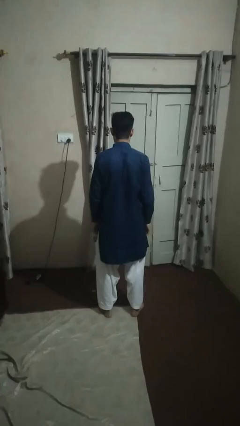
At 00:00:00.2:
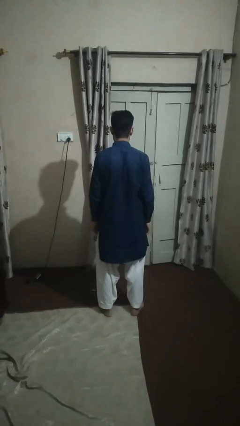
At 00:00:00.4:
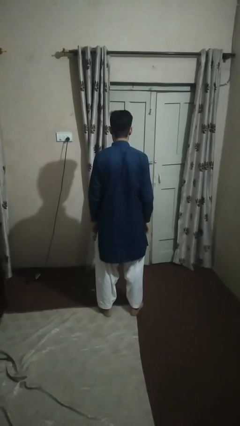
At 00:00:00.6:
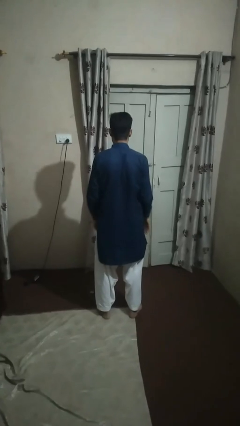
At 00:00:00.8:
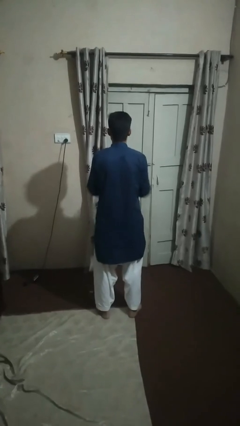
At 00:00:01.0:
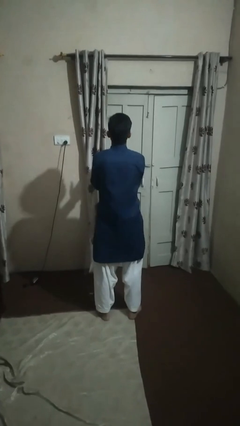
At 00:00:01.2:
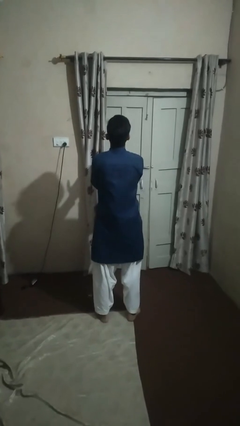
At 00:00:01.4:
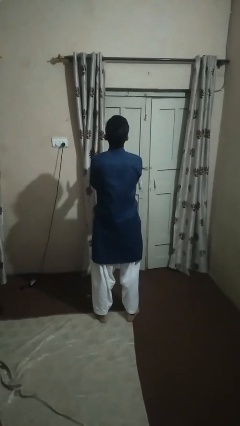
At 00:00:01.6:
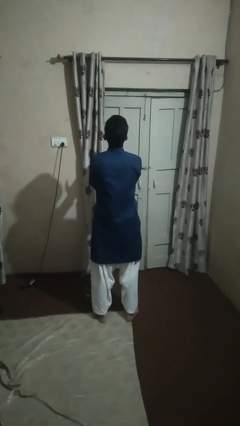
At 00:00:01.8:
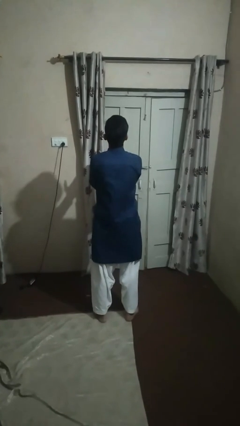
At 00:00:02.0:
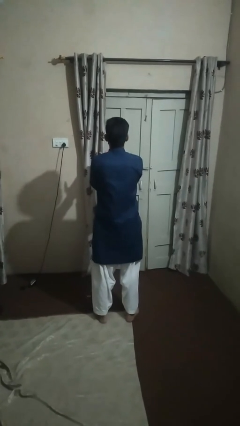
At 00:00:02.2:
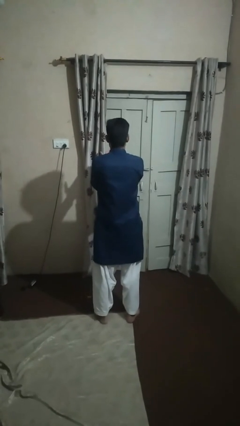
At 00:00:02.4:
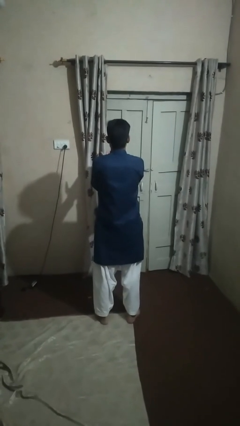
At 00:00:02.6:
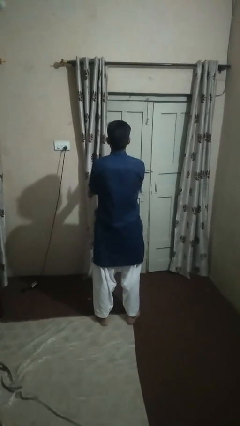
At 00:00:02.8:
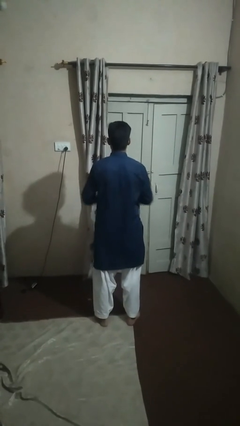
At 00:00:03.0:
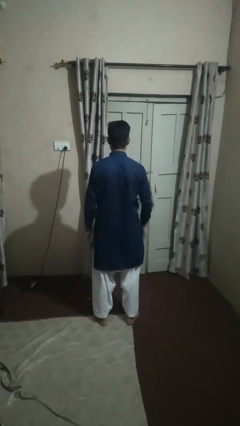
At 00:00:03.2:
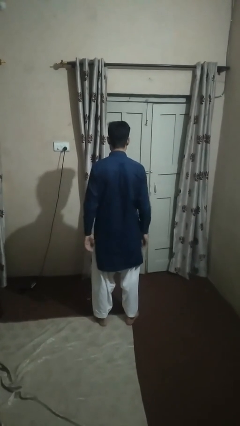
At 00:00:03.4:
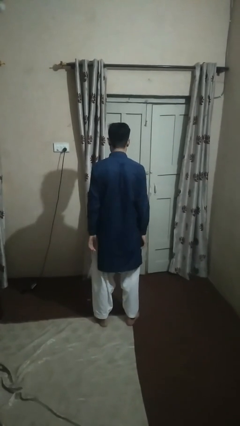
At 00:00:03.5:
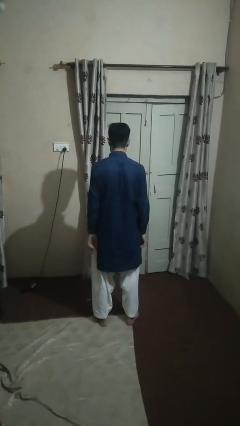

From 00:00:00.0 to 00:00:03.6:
person prays

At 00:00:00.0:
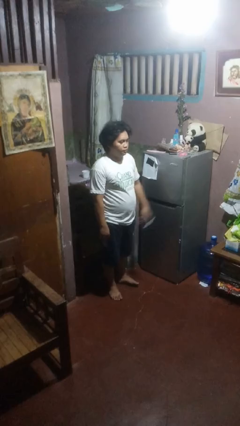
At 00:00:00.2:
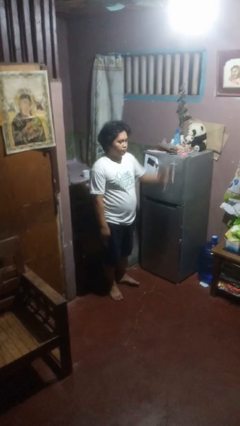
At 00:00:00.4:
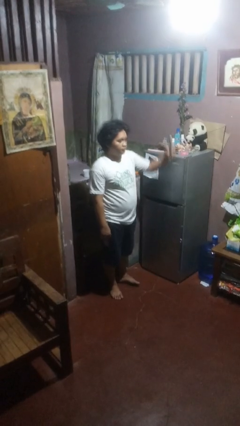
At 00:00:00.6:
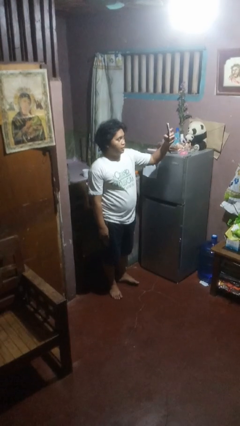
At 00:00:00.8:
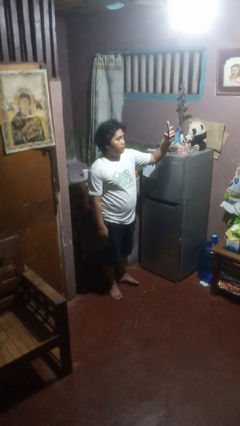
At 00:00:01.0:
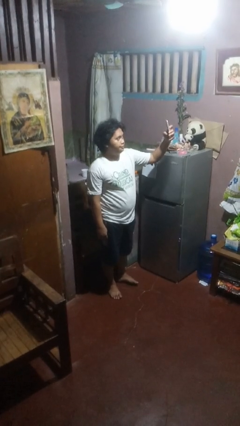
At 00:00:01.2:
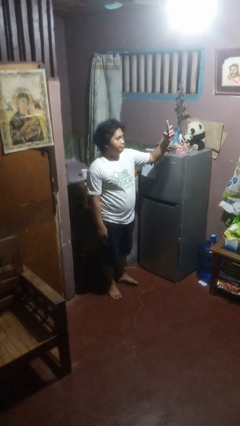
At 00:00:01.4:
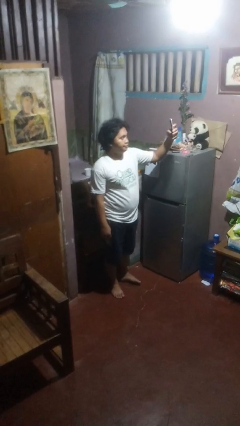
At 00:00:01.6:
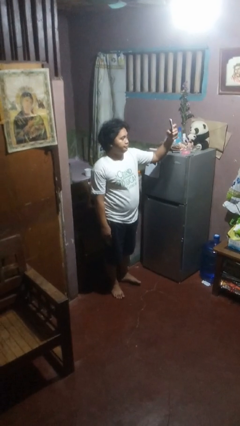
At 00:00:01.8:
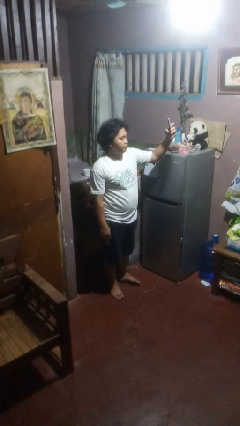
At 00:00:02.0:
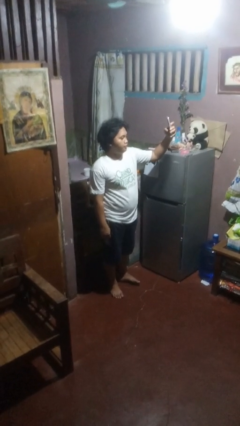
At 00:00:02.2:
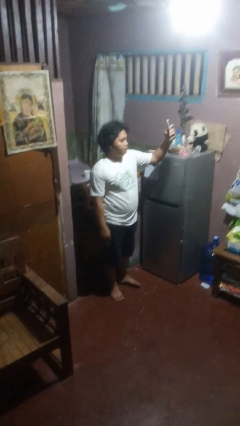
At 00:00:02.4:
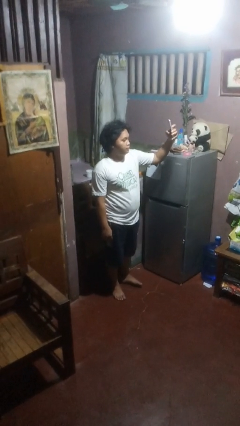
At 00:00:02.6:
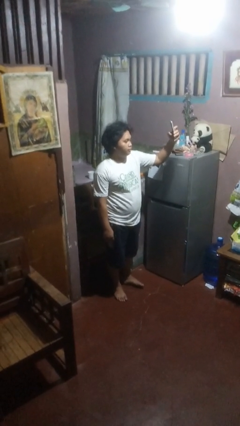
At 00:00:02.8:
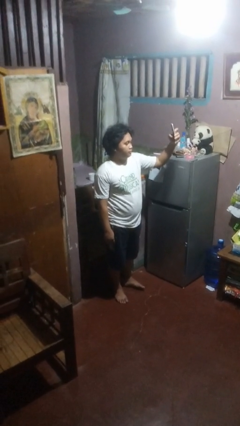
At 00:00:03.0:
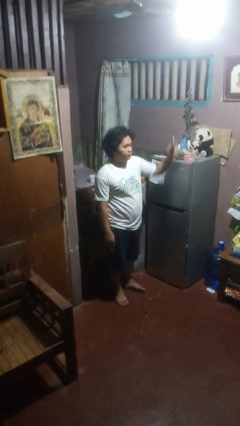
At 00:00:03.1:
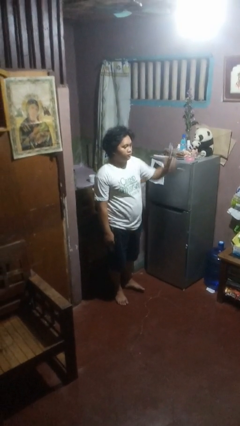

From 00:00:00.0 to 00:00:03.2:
person takes selfie

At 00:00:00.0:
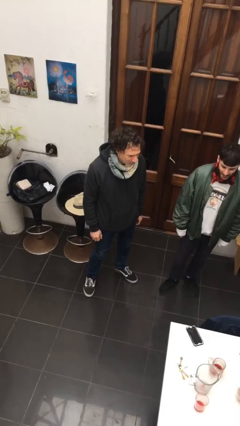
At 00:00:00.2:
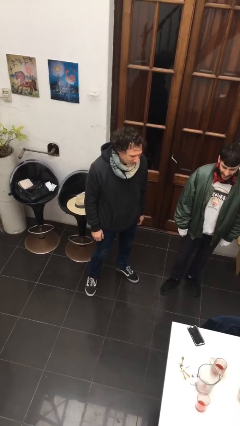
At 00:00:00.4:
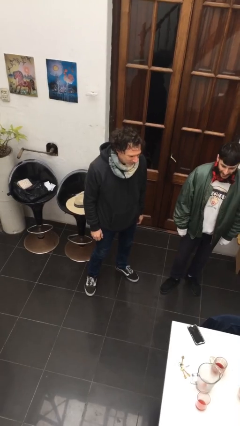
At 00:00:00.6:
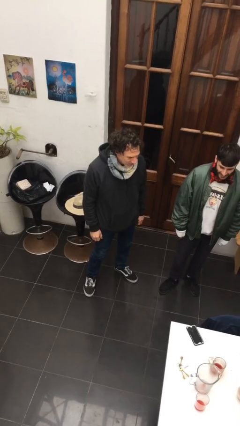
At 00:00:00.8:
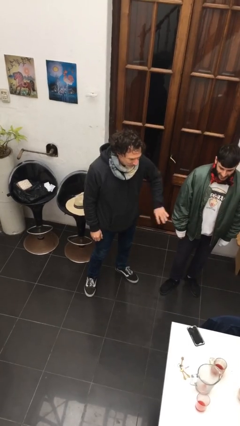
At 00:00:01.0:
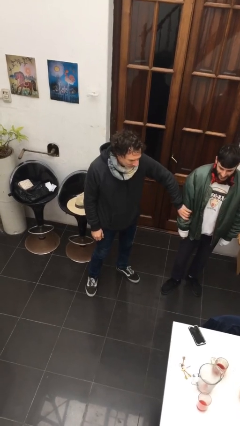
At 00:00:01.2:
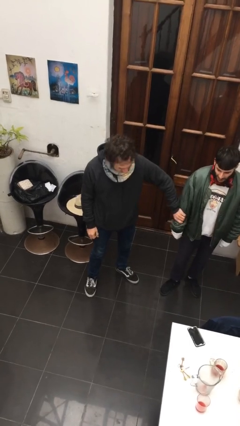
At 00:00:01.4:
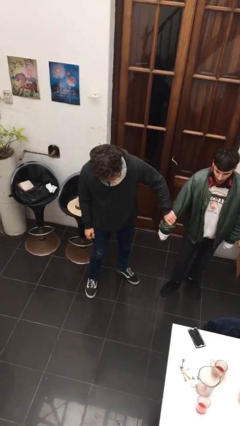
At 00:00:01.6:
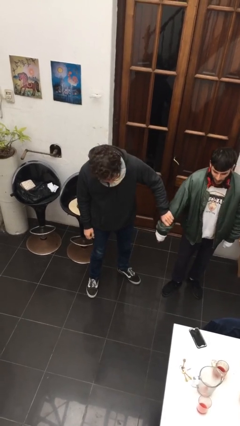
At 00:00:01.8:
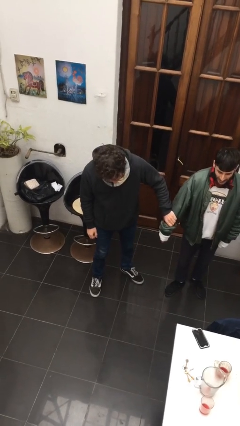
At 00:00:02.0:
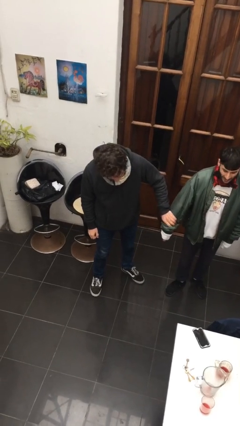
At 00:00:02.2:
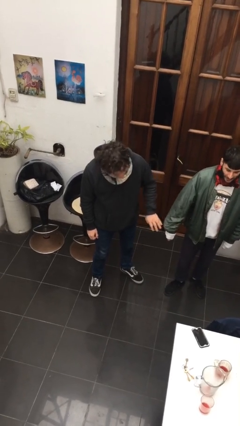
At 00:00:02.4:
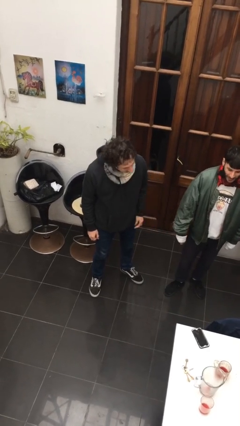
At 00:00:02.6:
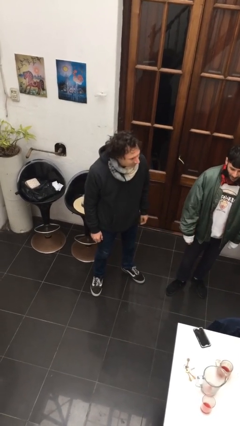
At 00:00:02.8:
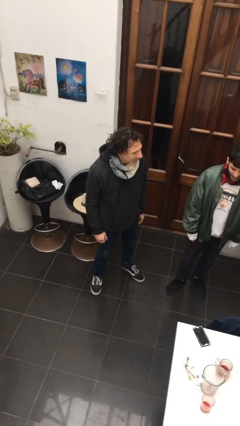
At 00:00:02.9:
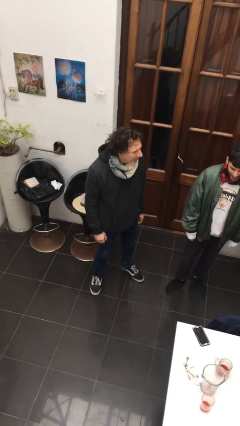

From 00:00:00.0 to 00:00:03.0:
person grabs person by forearm

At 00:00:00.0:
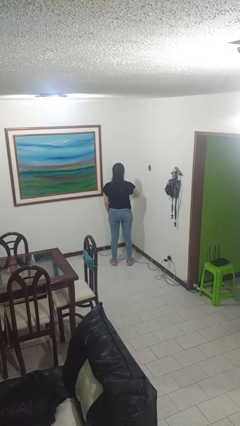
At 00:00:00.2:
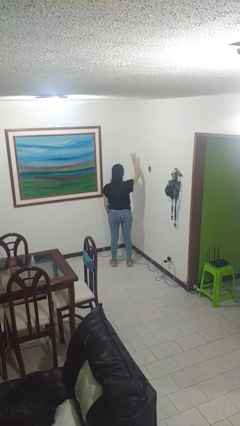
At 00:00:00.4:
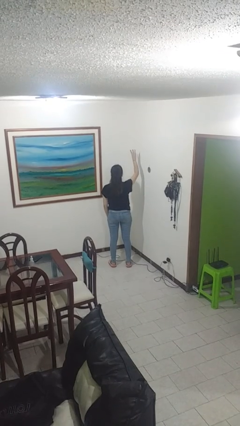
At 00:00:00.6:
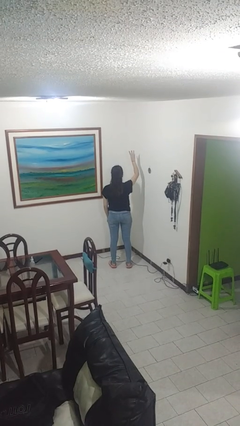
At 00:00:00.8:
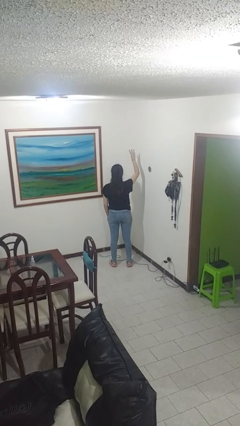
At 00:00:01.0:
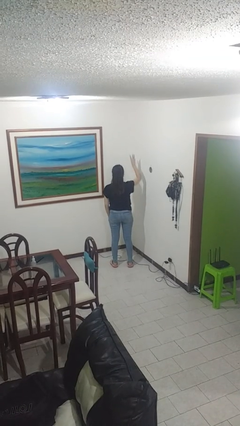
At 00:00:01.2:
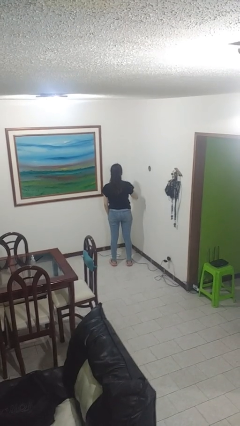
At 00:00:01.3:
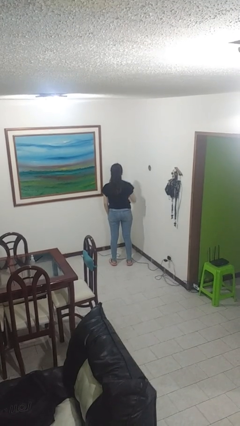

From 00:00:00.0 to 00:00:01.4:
person gestures number three

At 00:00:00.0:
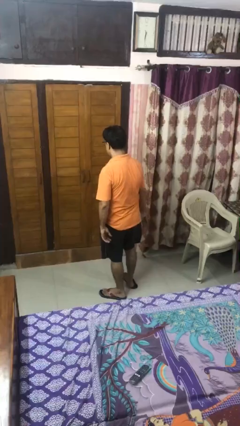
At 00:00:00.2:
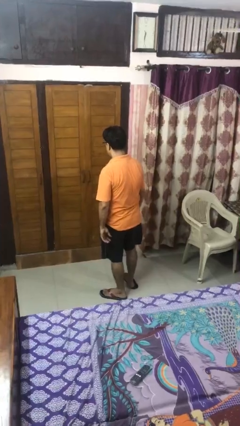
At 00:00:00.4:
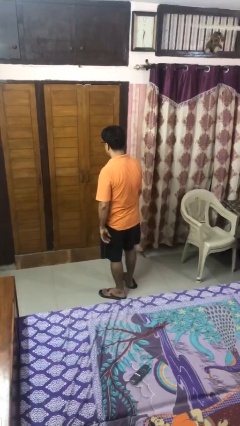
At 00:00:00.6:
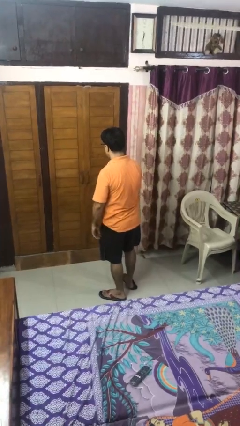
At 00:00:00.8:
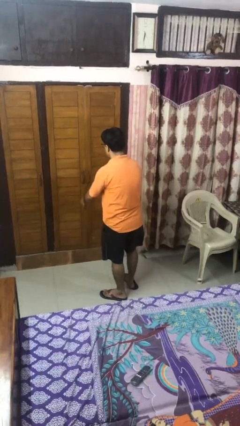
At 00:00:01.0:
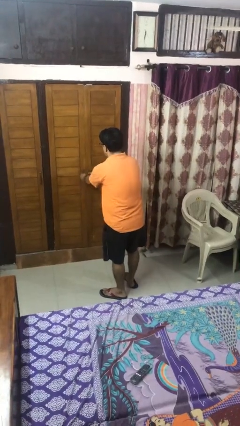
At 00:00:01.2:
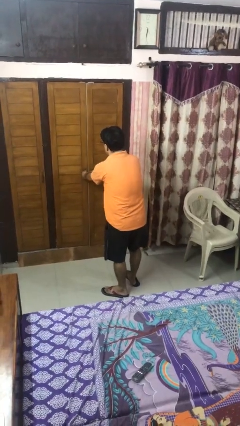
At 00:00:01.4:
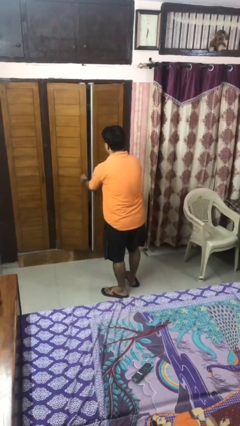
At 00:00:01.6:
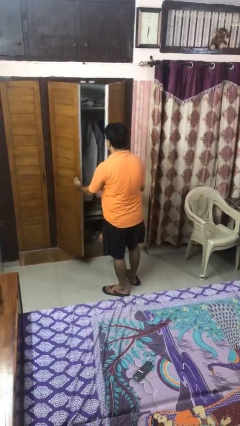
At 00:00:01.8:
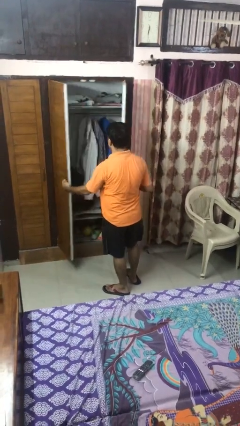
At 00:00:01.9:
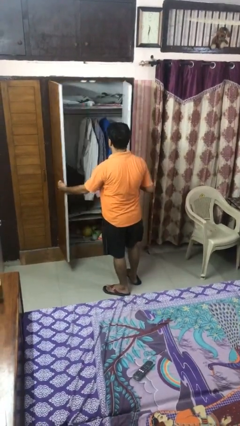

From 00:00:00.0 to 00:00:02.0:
person opens closet door

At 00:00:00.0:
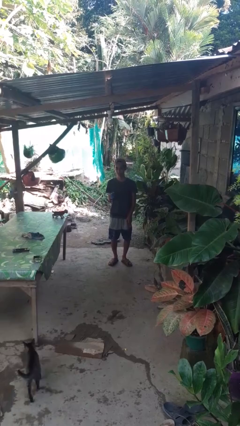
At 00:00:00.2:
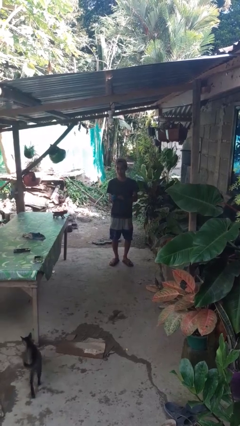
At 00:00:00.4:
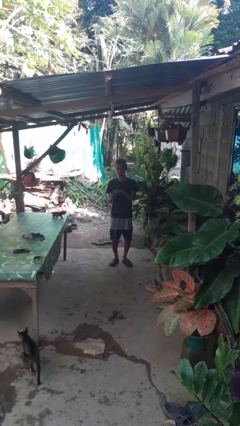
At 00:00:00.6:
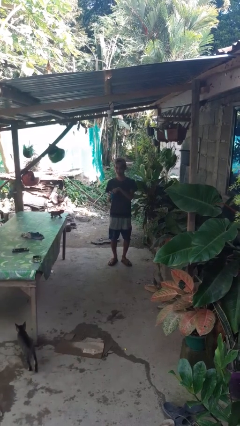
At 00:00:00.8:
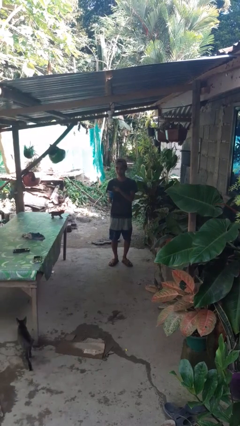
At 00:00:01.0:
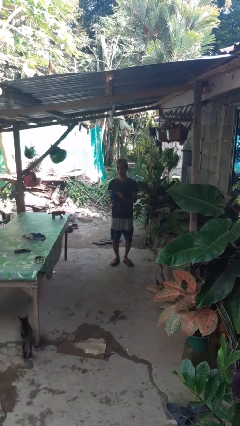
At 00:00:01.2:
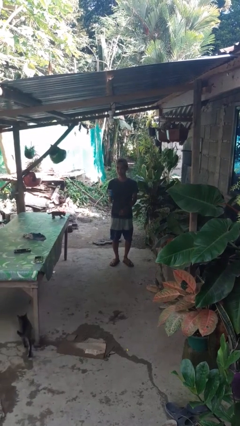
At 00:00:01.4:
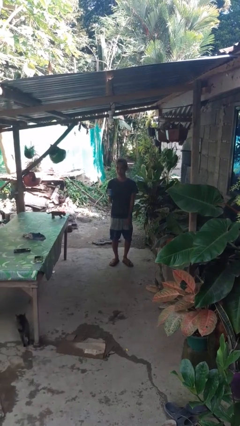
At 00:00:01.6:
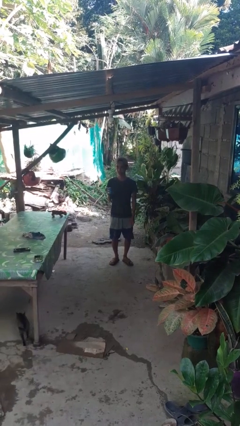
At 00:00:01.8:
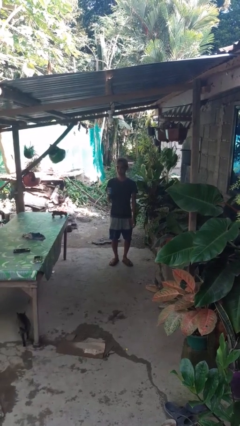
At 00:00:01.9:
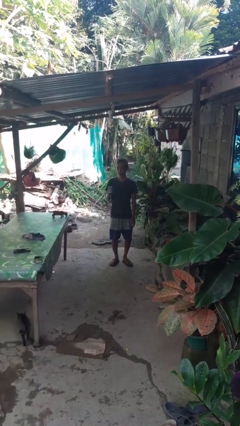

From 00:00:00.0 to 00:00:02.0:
person opens beverage can

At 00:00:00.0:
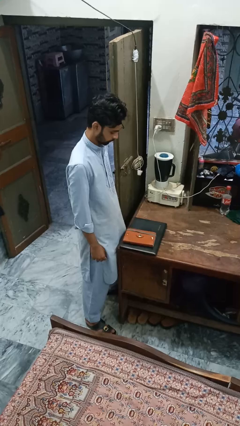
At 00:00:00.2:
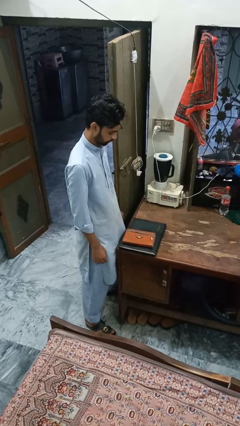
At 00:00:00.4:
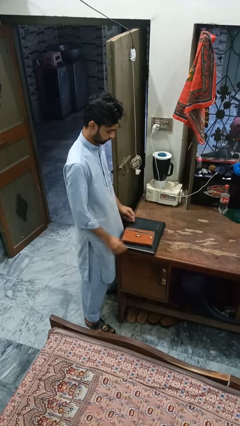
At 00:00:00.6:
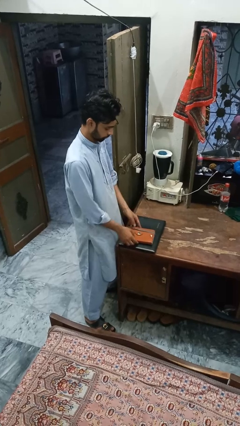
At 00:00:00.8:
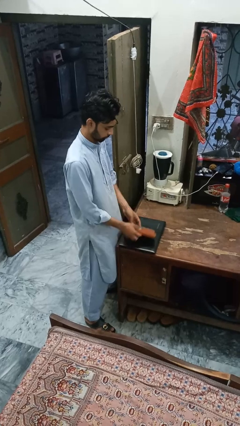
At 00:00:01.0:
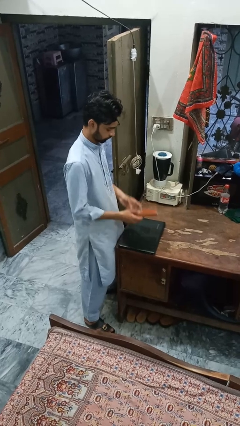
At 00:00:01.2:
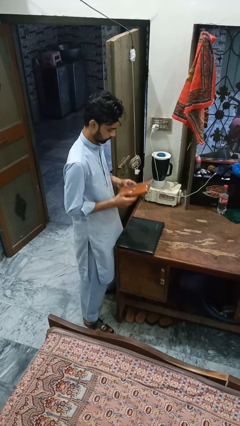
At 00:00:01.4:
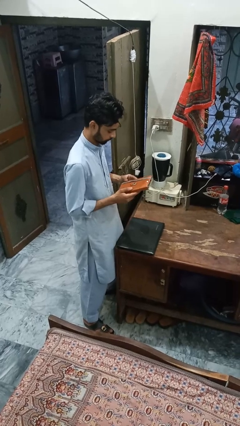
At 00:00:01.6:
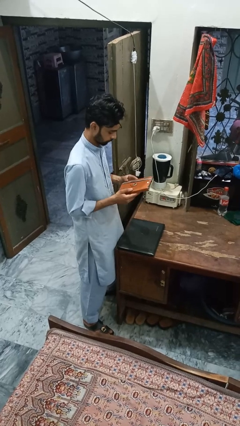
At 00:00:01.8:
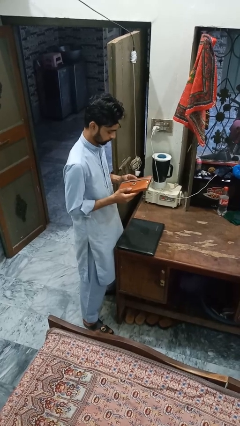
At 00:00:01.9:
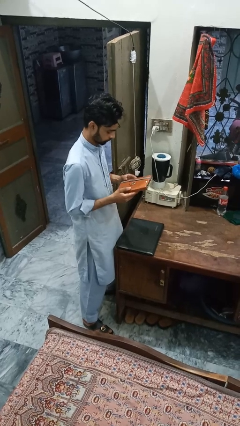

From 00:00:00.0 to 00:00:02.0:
person picks up object from countertop
